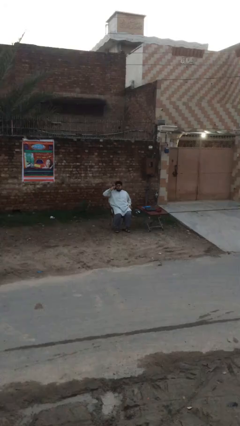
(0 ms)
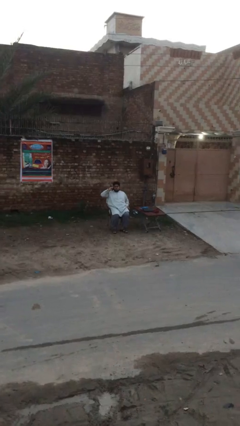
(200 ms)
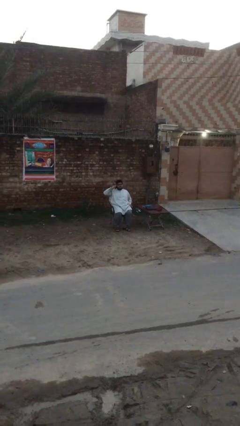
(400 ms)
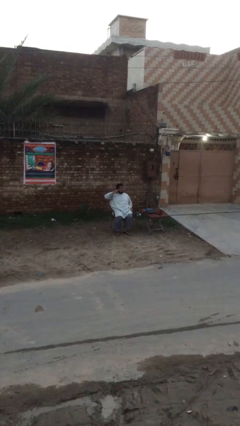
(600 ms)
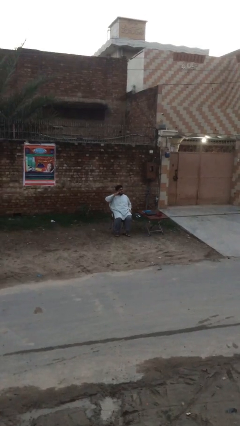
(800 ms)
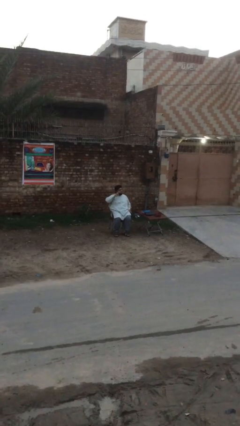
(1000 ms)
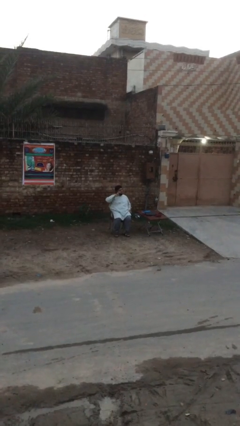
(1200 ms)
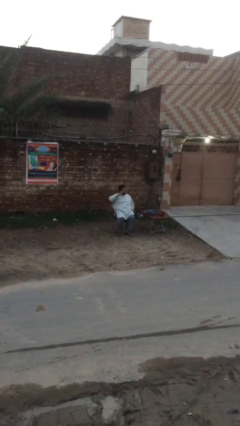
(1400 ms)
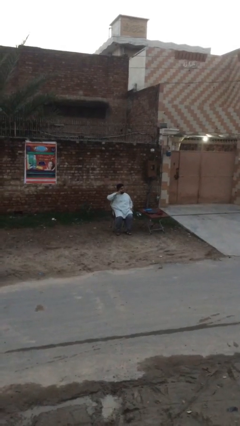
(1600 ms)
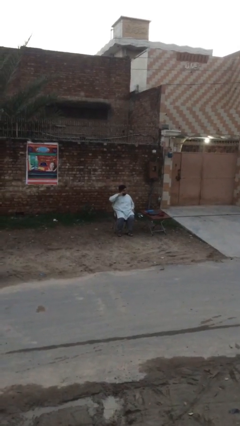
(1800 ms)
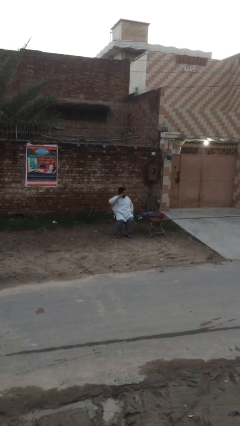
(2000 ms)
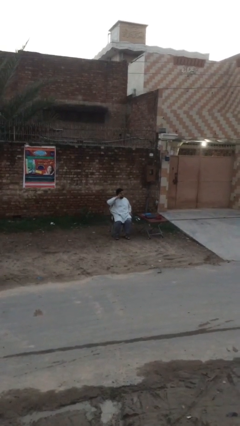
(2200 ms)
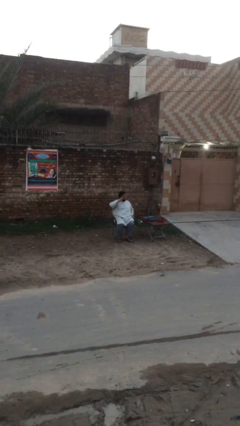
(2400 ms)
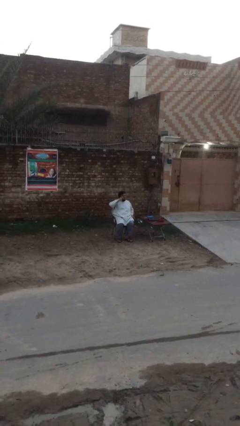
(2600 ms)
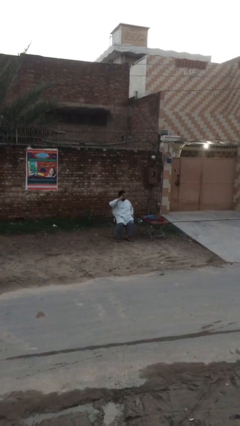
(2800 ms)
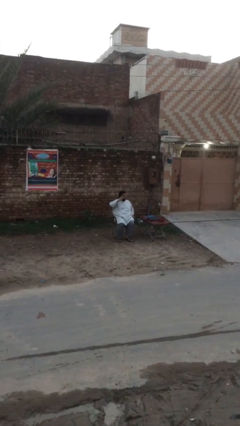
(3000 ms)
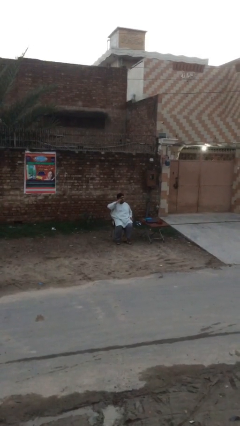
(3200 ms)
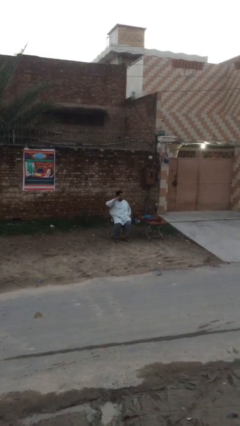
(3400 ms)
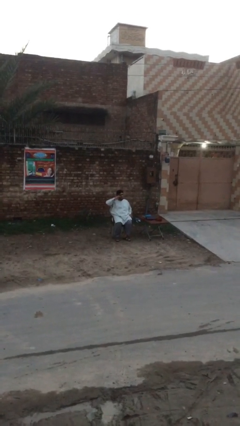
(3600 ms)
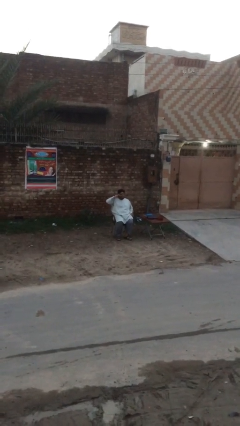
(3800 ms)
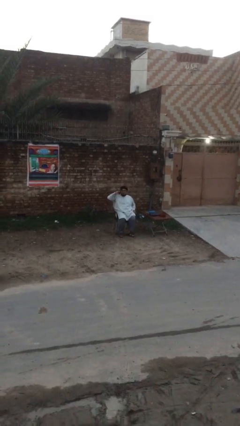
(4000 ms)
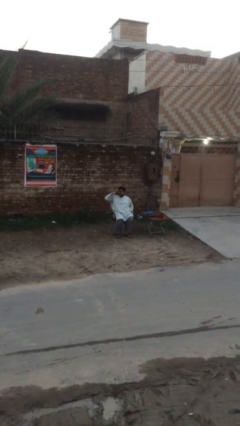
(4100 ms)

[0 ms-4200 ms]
person talks on phone

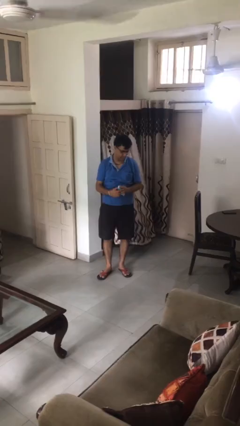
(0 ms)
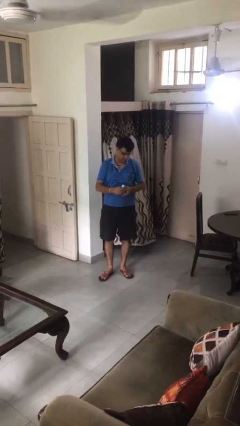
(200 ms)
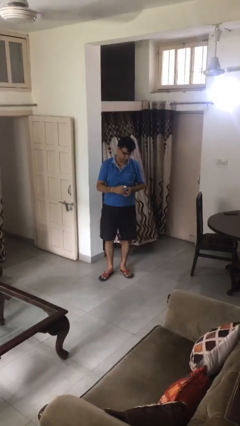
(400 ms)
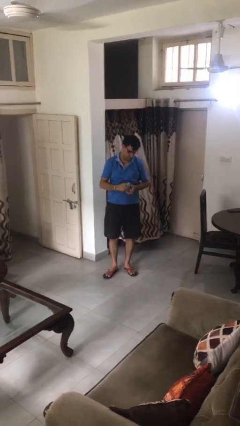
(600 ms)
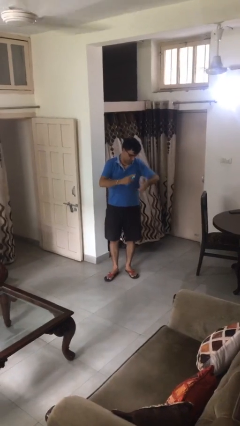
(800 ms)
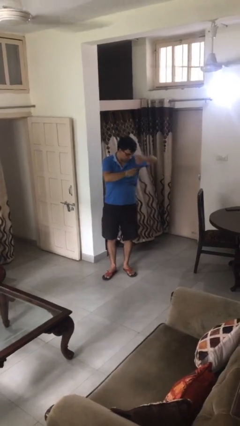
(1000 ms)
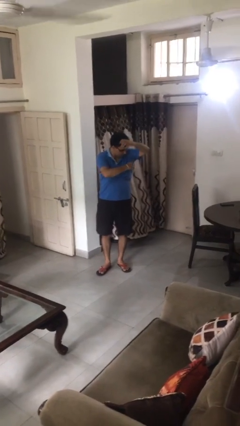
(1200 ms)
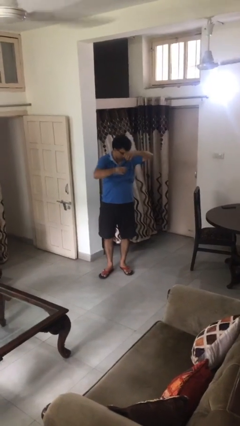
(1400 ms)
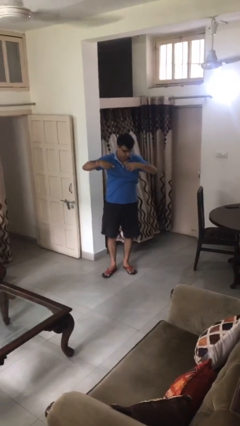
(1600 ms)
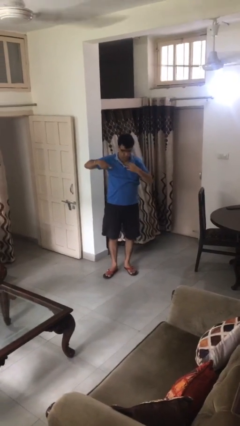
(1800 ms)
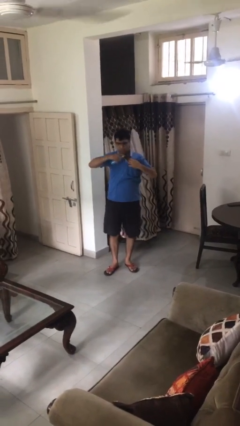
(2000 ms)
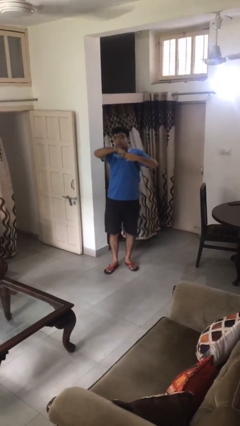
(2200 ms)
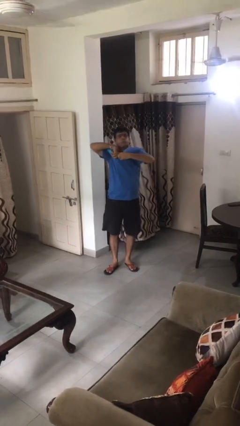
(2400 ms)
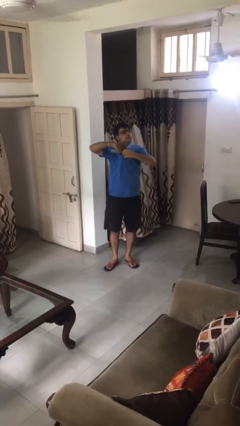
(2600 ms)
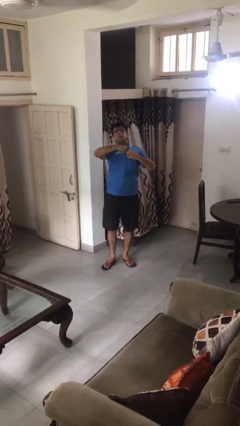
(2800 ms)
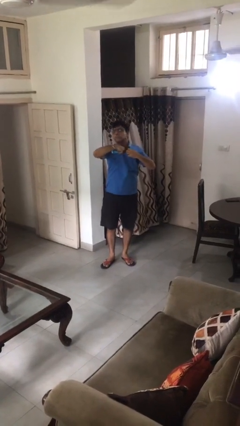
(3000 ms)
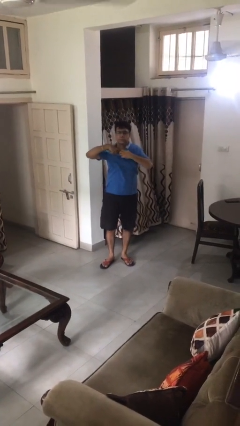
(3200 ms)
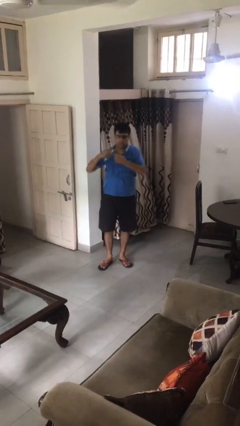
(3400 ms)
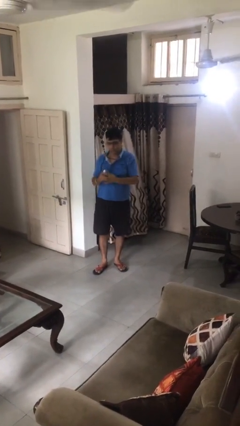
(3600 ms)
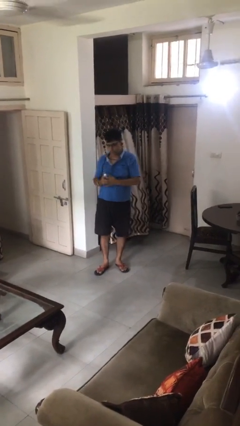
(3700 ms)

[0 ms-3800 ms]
person applies deodorant

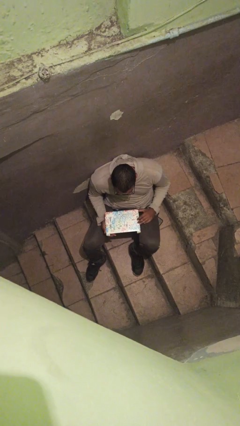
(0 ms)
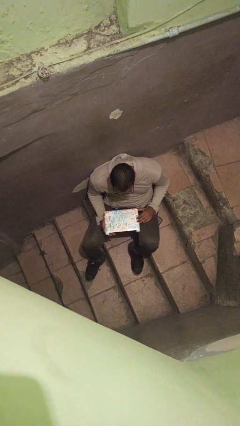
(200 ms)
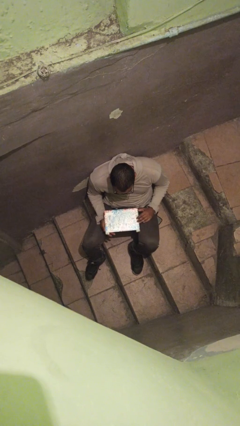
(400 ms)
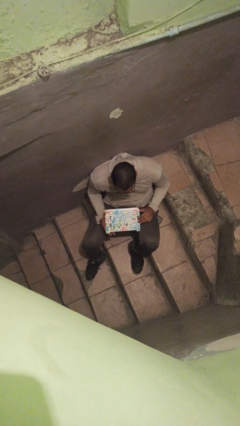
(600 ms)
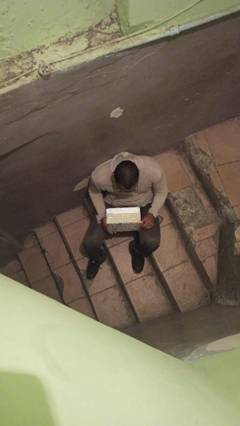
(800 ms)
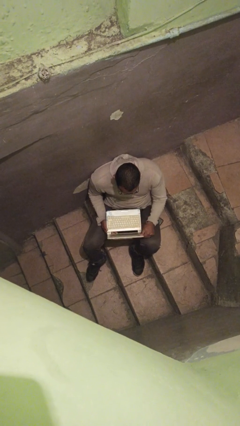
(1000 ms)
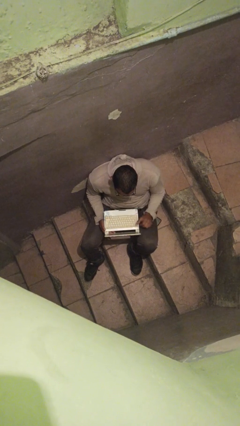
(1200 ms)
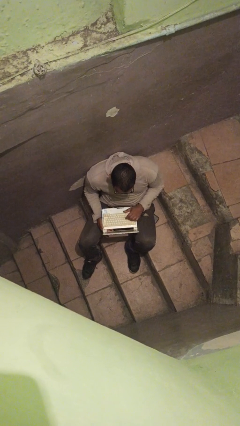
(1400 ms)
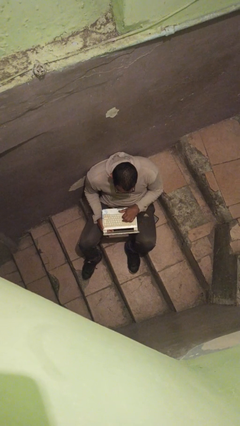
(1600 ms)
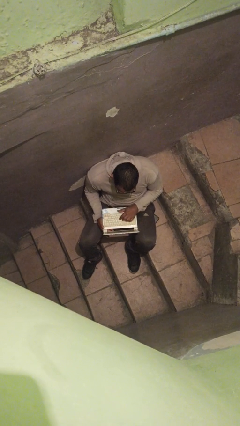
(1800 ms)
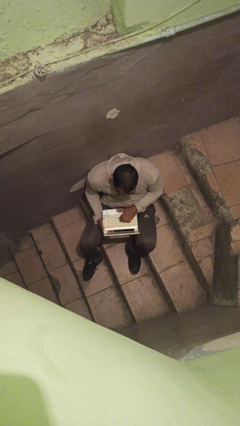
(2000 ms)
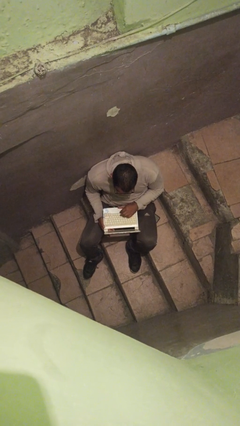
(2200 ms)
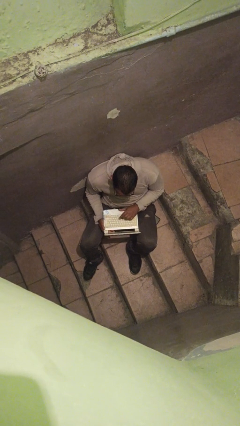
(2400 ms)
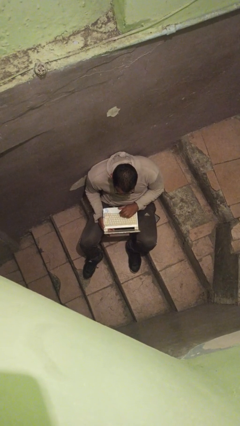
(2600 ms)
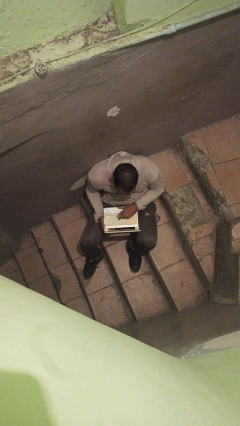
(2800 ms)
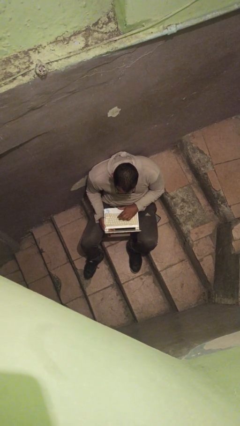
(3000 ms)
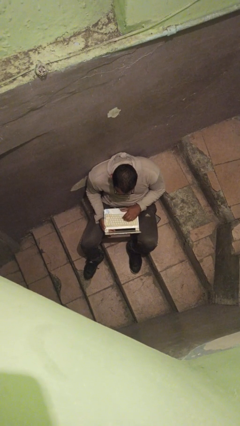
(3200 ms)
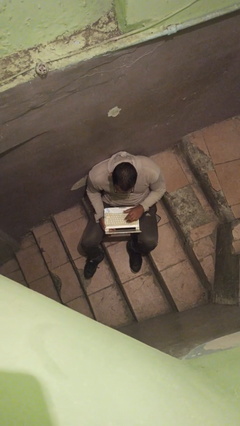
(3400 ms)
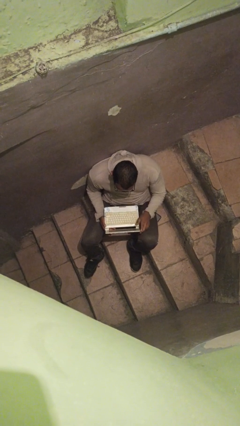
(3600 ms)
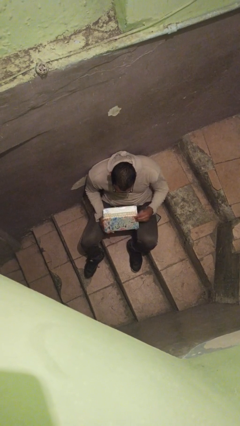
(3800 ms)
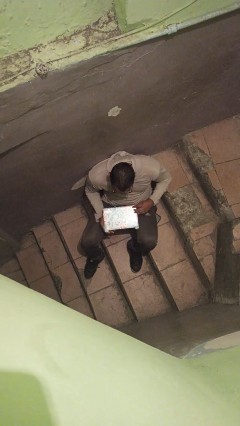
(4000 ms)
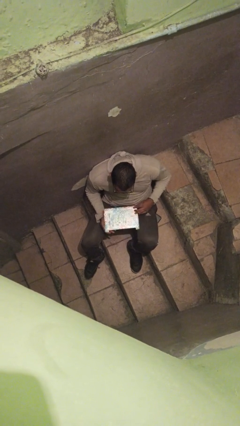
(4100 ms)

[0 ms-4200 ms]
person interacts with laptop

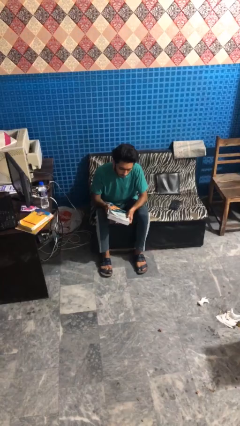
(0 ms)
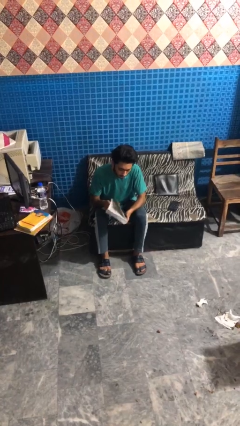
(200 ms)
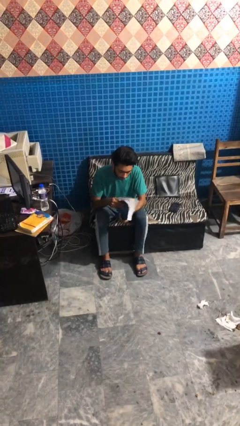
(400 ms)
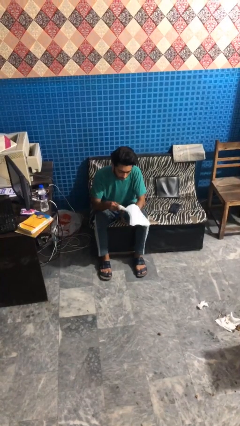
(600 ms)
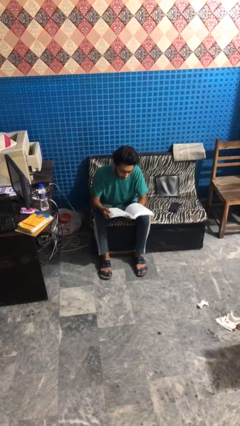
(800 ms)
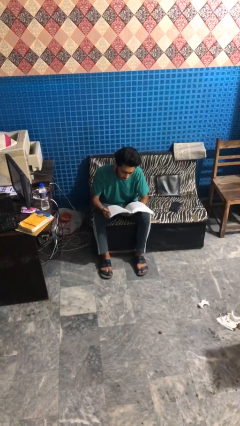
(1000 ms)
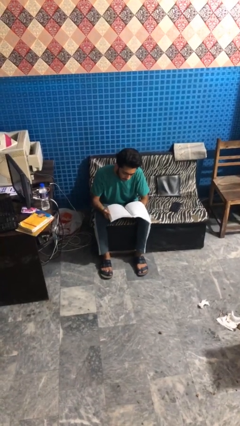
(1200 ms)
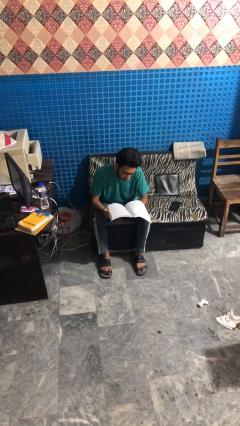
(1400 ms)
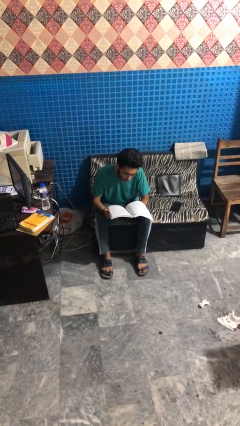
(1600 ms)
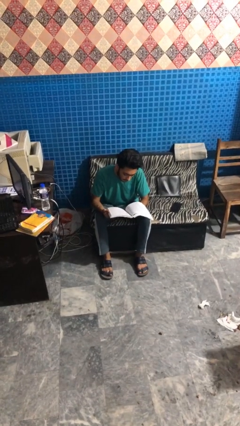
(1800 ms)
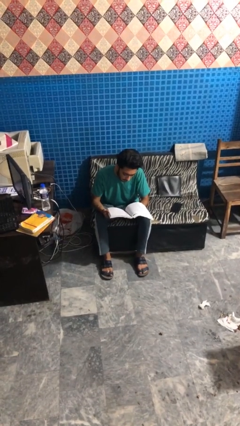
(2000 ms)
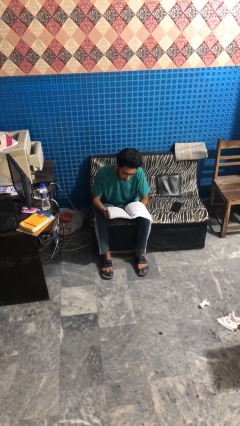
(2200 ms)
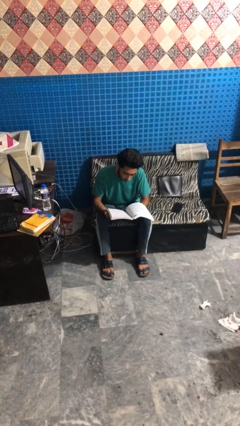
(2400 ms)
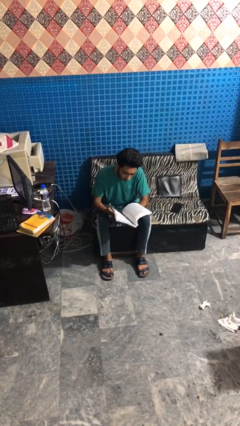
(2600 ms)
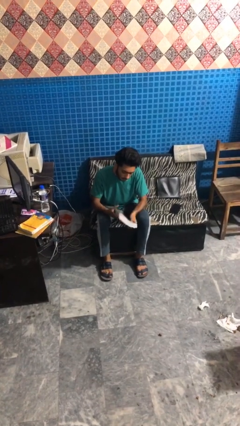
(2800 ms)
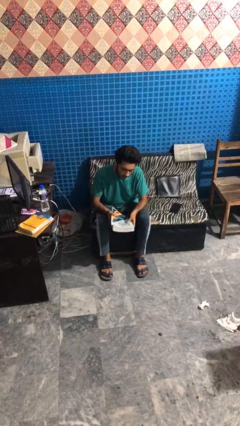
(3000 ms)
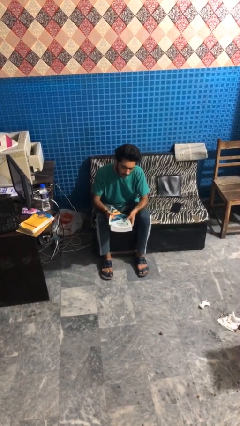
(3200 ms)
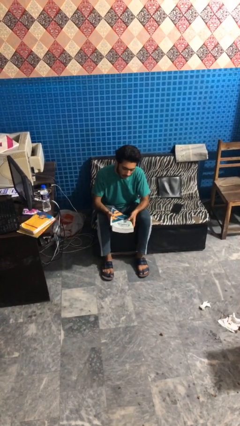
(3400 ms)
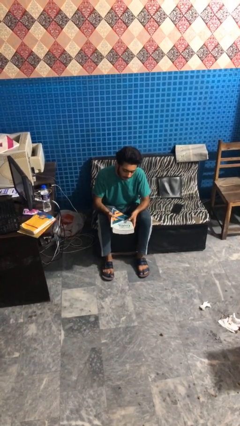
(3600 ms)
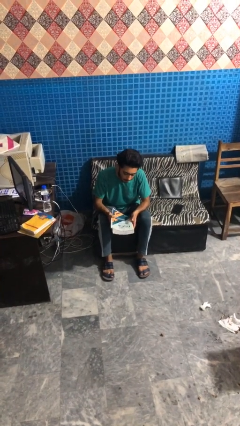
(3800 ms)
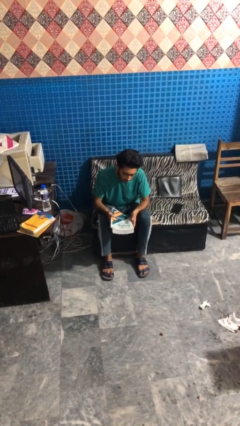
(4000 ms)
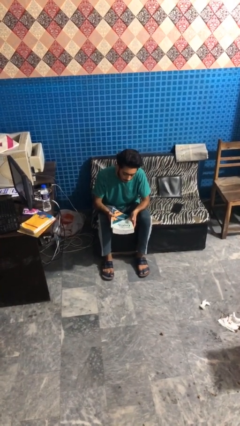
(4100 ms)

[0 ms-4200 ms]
person reads book

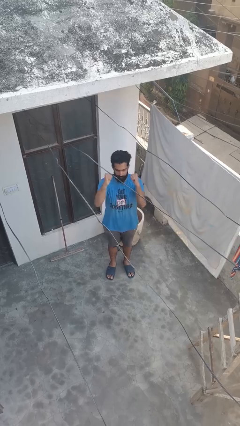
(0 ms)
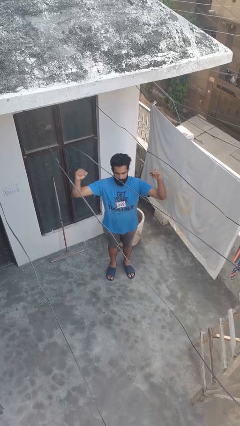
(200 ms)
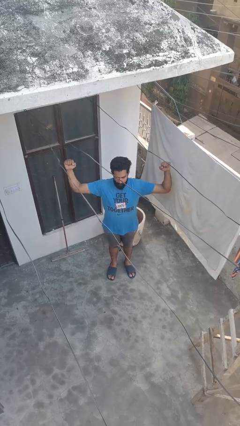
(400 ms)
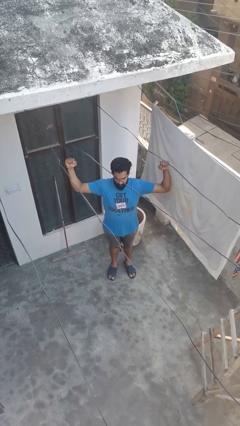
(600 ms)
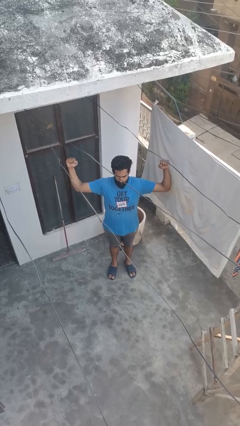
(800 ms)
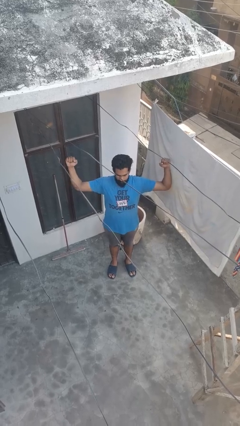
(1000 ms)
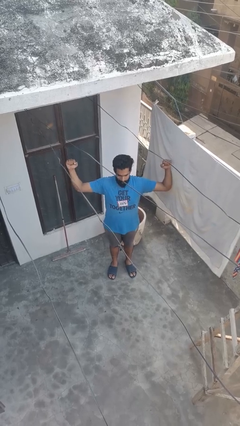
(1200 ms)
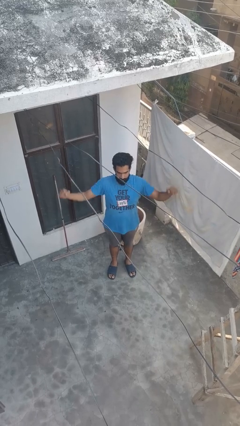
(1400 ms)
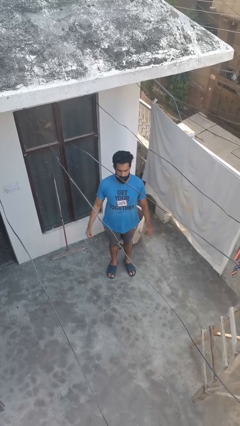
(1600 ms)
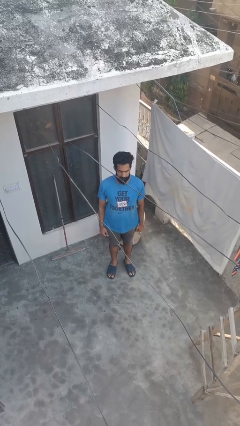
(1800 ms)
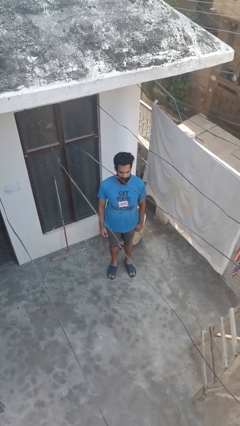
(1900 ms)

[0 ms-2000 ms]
person gestures zoom out
